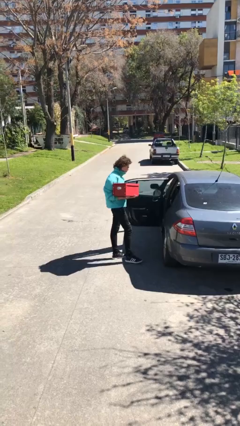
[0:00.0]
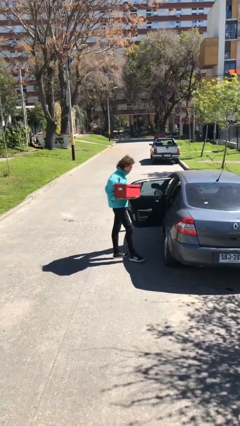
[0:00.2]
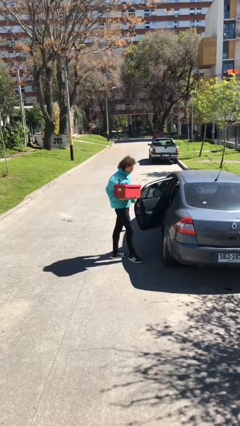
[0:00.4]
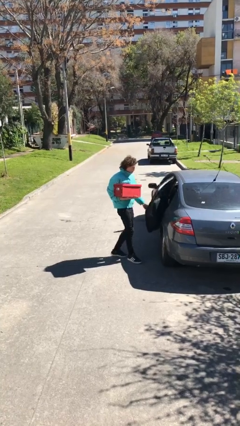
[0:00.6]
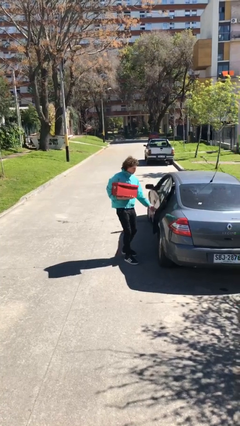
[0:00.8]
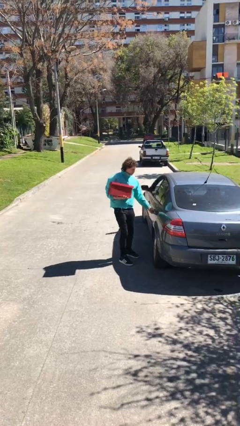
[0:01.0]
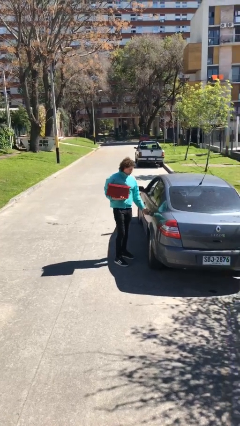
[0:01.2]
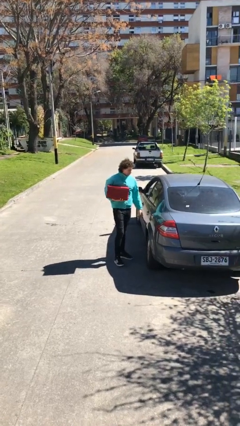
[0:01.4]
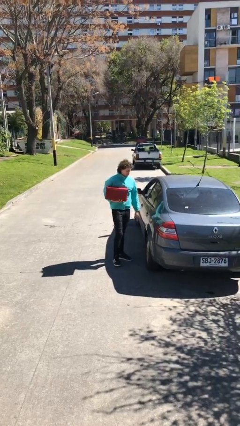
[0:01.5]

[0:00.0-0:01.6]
person closes car door

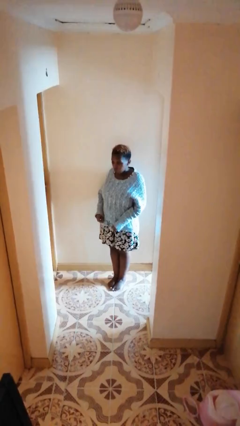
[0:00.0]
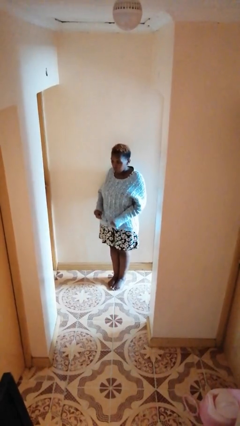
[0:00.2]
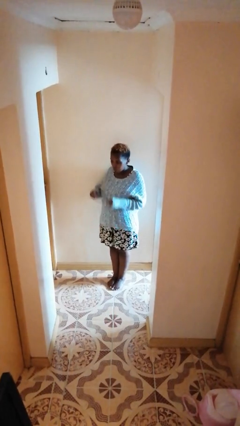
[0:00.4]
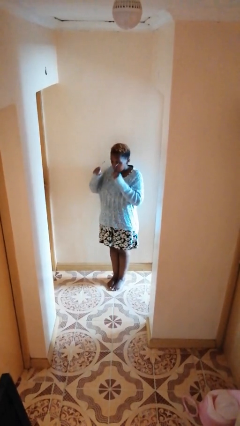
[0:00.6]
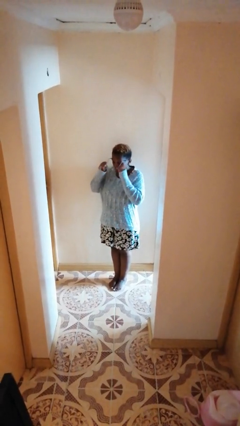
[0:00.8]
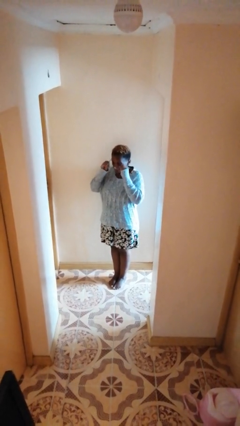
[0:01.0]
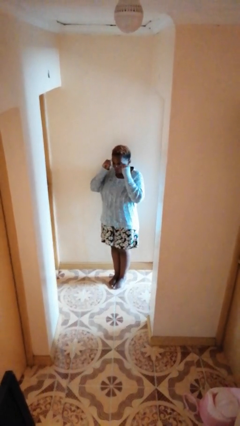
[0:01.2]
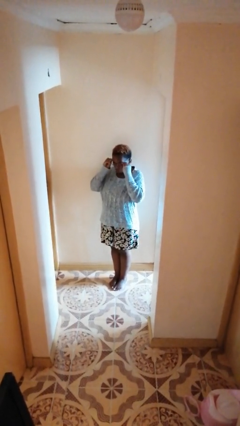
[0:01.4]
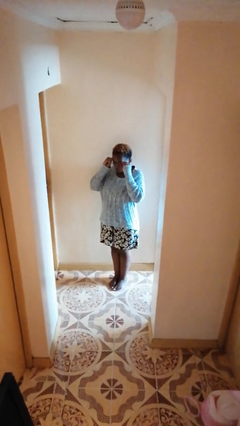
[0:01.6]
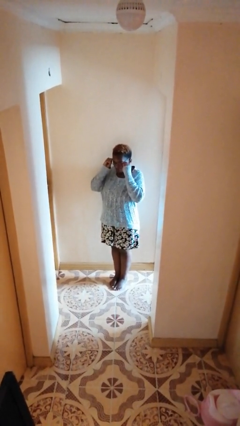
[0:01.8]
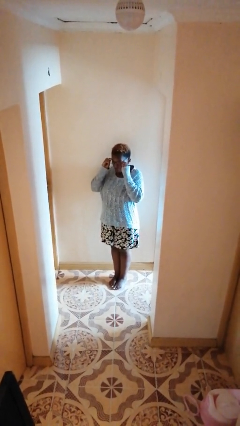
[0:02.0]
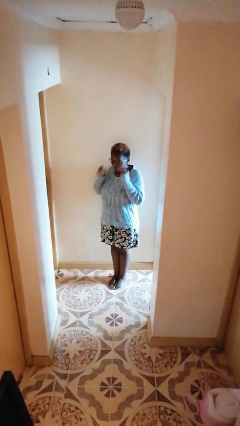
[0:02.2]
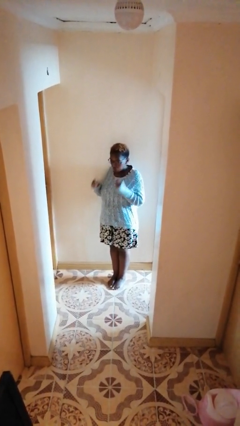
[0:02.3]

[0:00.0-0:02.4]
person puts on glasses

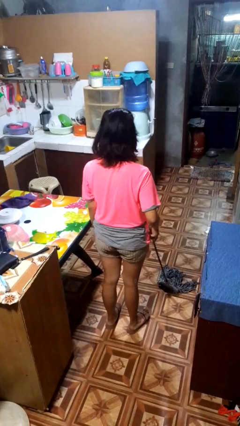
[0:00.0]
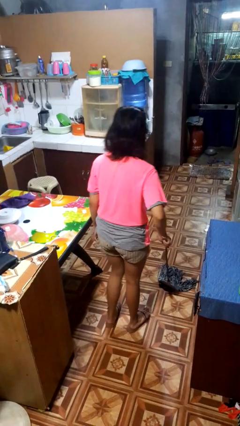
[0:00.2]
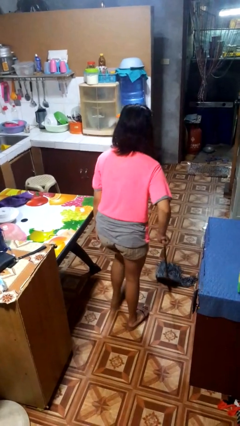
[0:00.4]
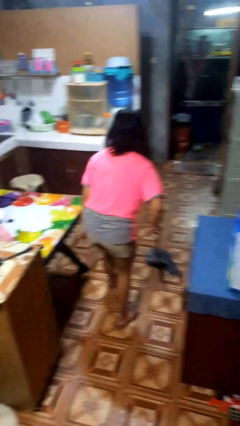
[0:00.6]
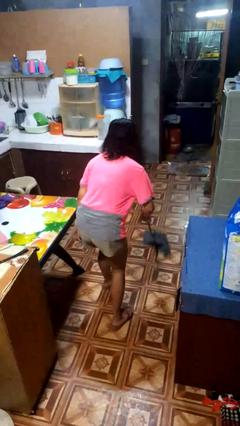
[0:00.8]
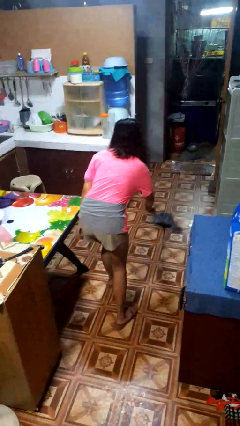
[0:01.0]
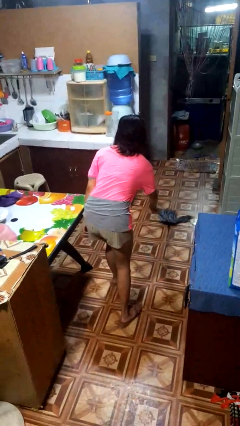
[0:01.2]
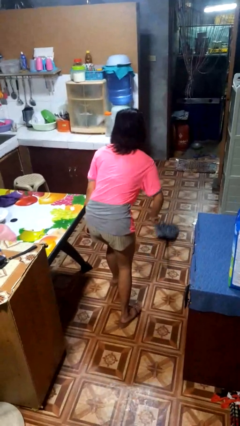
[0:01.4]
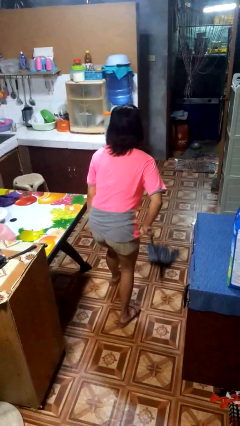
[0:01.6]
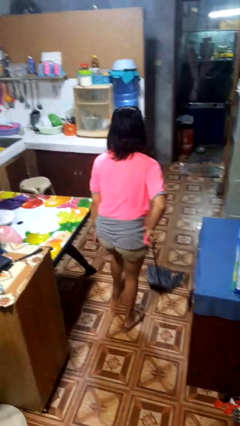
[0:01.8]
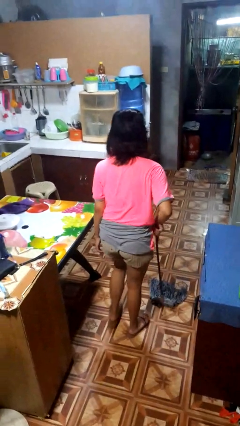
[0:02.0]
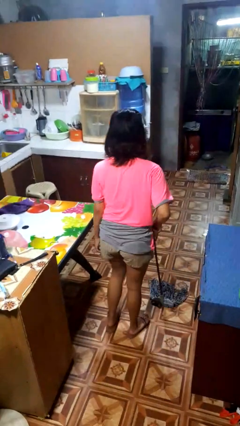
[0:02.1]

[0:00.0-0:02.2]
person mops

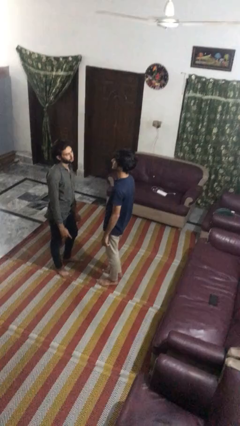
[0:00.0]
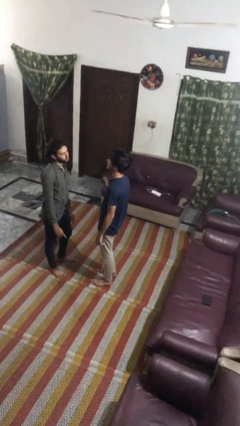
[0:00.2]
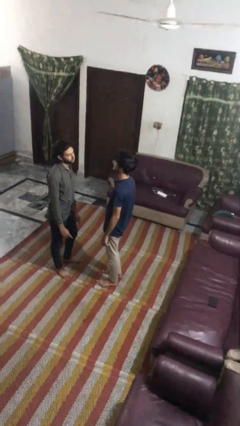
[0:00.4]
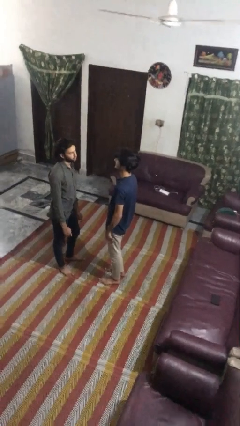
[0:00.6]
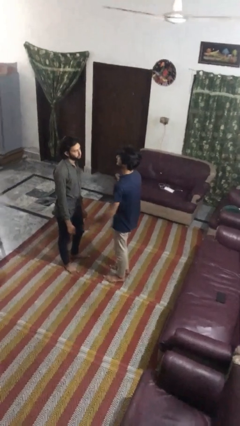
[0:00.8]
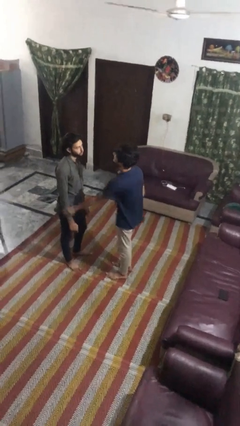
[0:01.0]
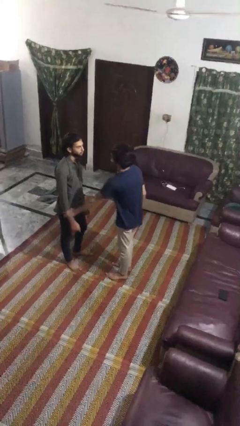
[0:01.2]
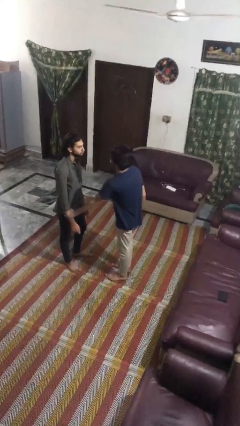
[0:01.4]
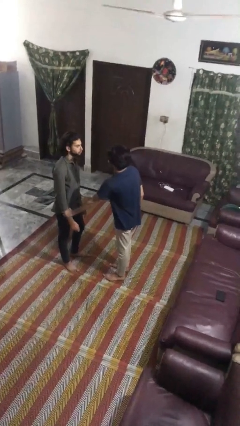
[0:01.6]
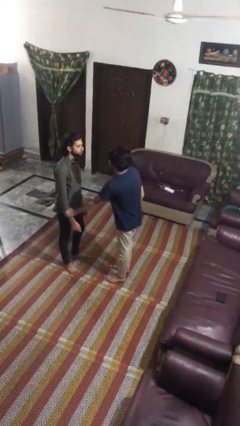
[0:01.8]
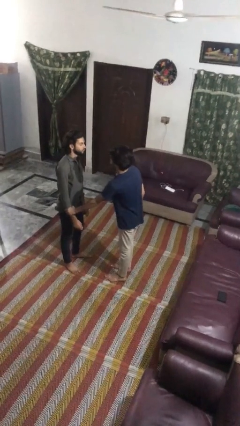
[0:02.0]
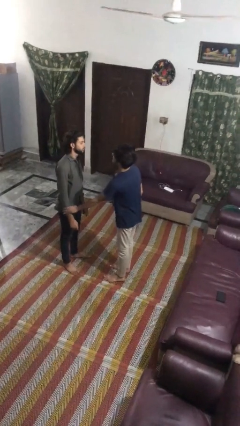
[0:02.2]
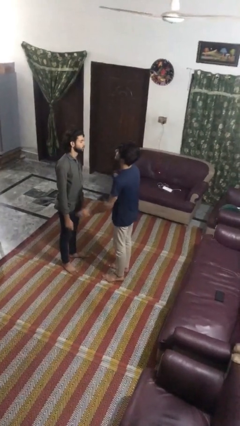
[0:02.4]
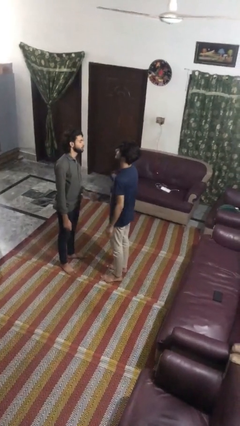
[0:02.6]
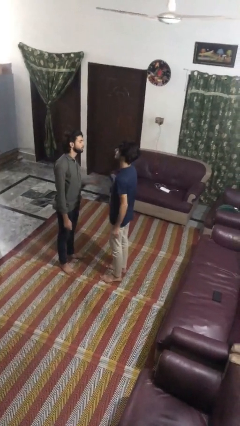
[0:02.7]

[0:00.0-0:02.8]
person grabs person by forearm

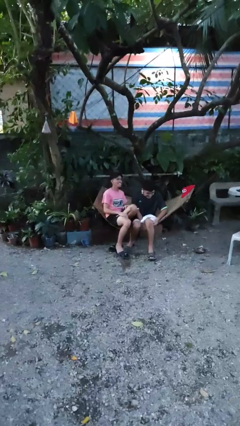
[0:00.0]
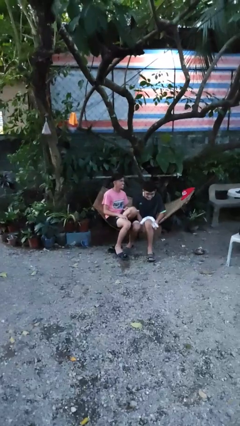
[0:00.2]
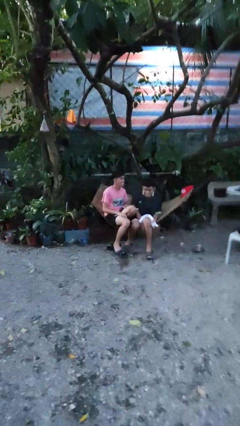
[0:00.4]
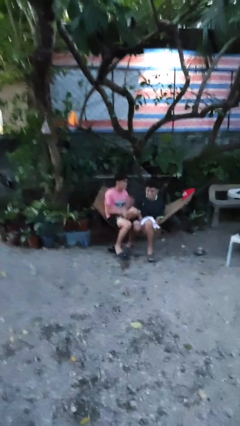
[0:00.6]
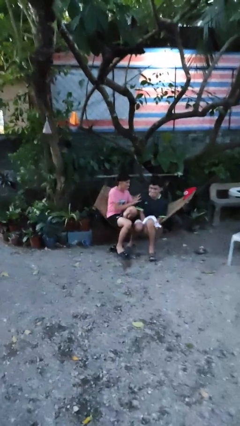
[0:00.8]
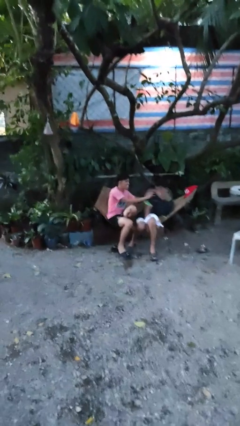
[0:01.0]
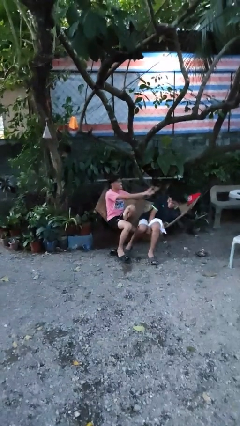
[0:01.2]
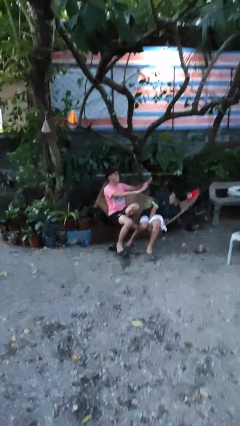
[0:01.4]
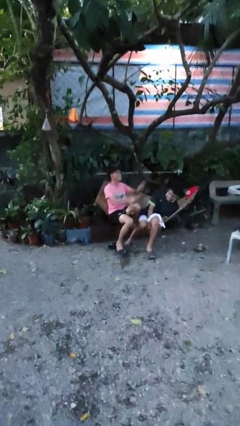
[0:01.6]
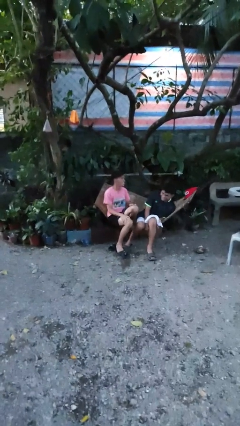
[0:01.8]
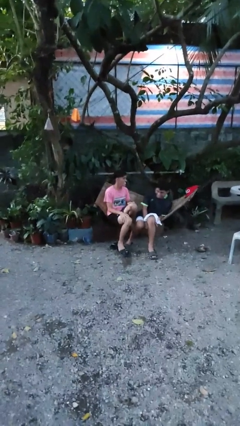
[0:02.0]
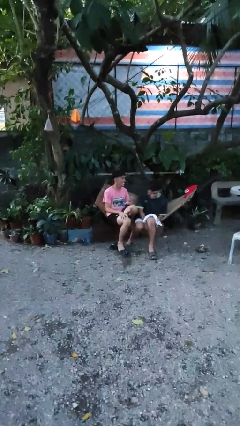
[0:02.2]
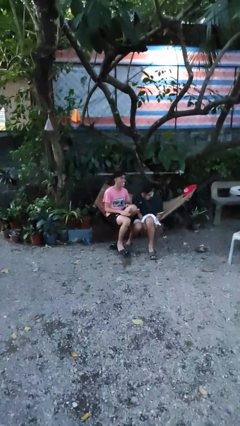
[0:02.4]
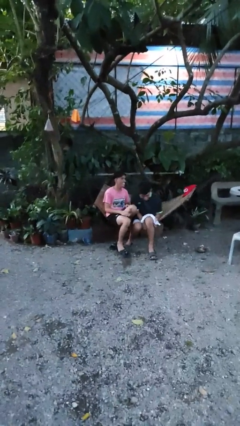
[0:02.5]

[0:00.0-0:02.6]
person shoves person

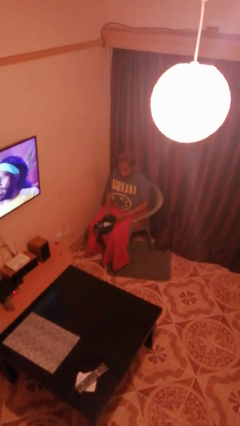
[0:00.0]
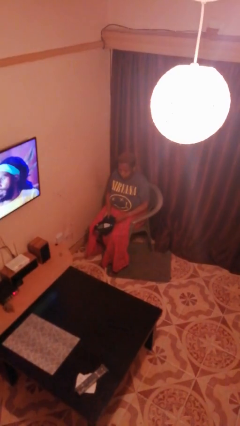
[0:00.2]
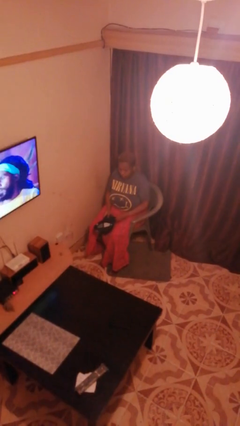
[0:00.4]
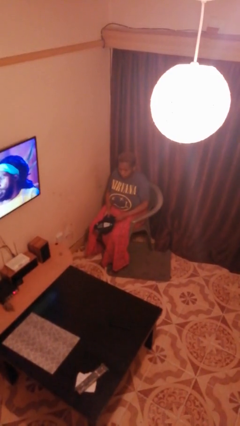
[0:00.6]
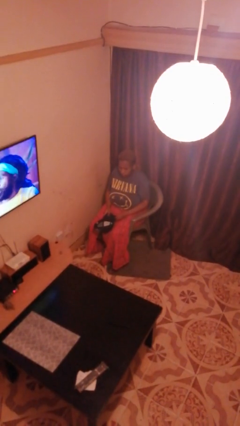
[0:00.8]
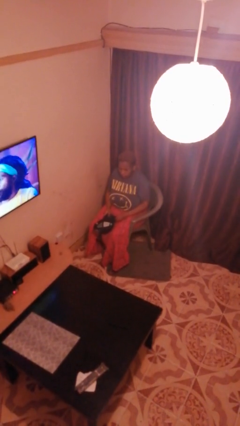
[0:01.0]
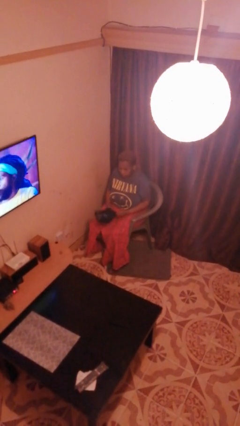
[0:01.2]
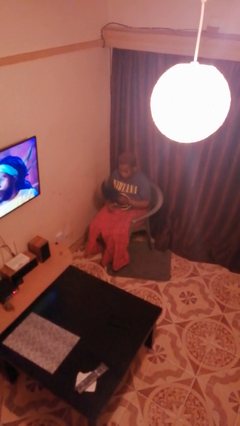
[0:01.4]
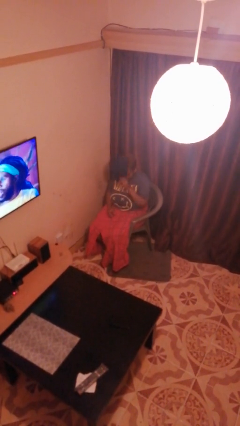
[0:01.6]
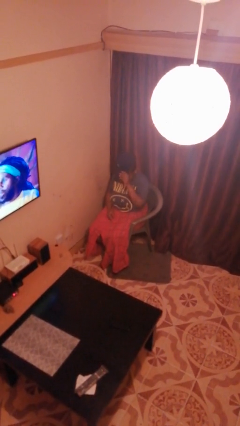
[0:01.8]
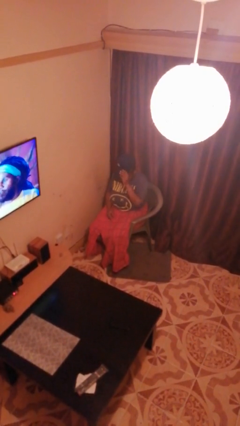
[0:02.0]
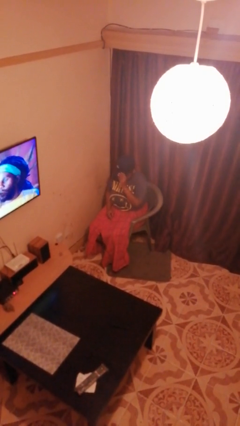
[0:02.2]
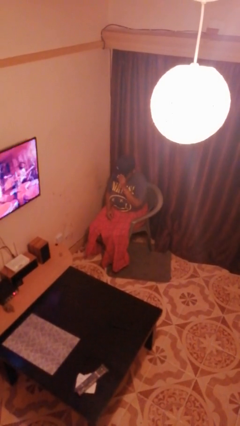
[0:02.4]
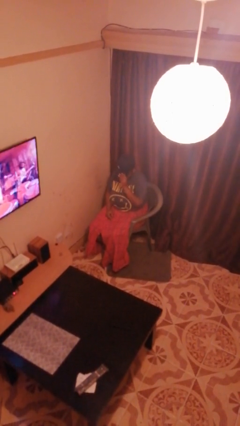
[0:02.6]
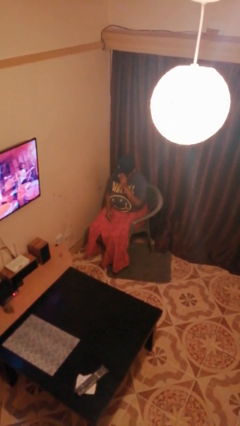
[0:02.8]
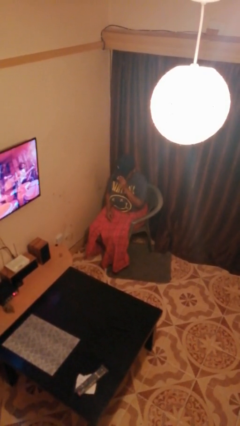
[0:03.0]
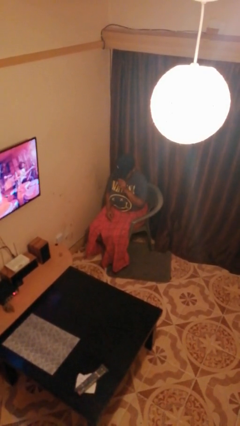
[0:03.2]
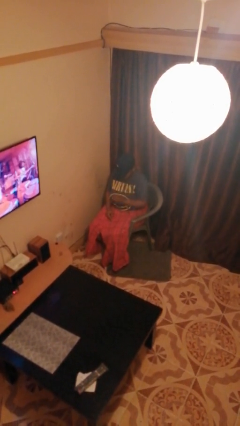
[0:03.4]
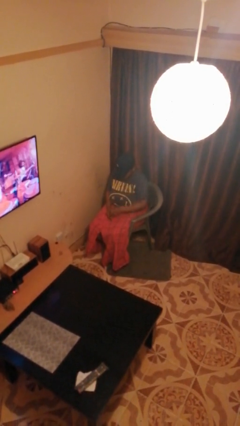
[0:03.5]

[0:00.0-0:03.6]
person puts on hat

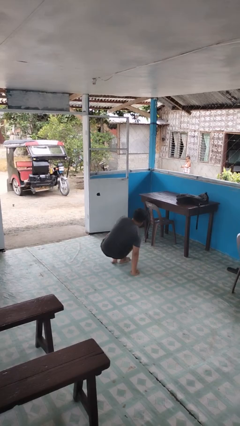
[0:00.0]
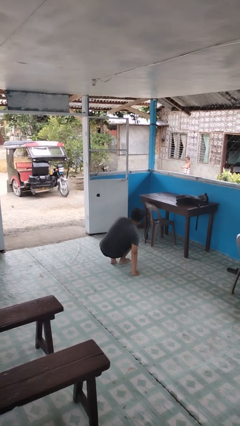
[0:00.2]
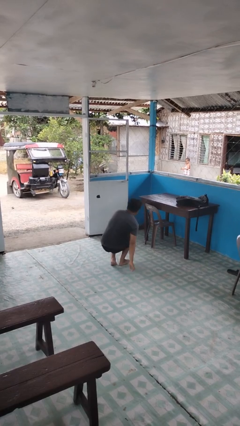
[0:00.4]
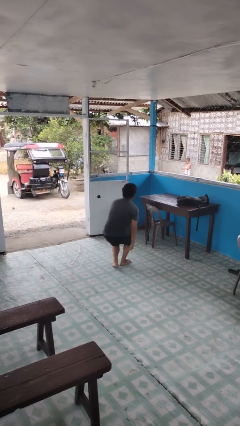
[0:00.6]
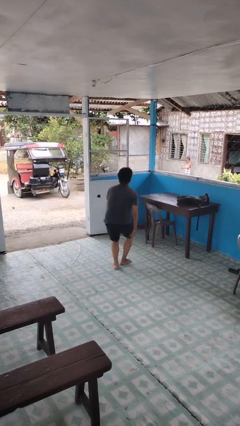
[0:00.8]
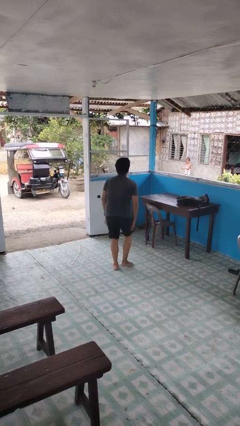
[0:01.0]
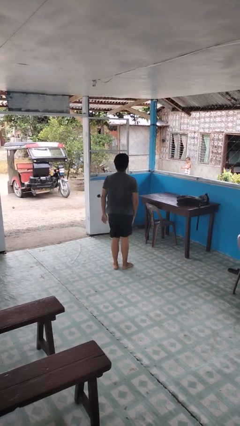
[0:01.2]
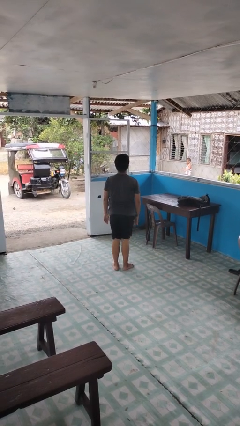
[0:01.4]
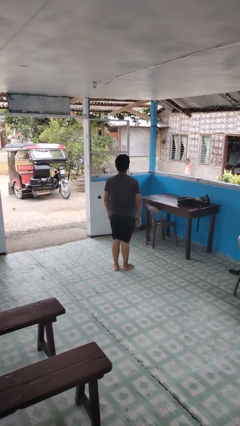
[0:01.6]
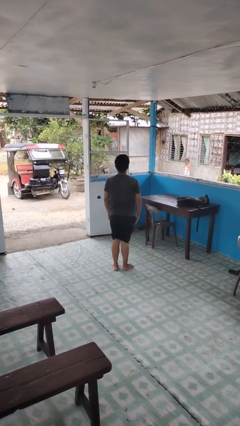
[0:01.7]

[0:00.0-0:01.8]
person stands up from floor
